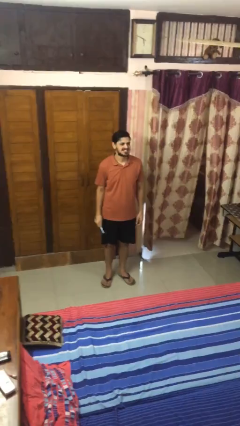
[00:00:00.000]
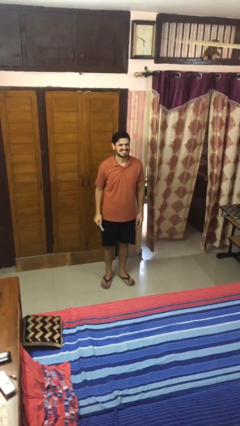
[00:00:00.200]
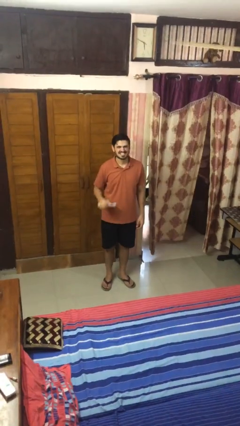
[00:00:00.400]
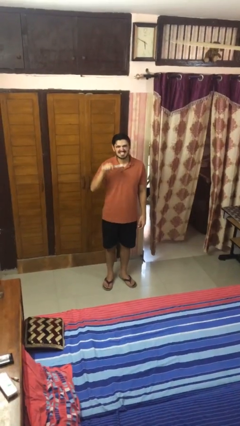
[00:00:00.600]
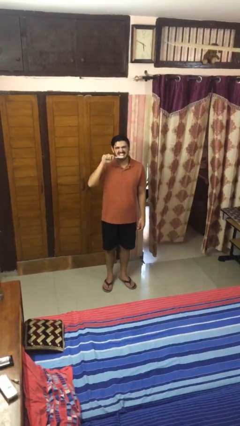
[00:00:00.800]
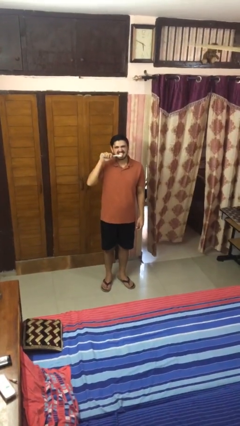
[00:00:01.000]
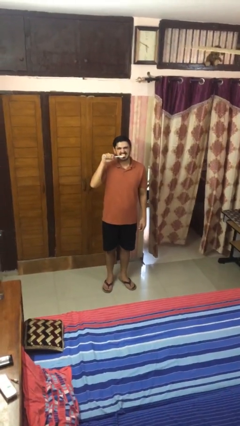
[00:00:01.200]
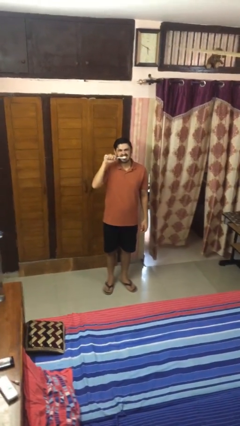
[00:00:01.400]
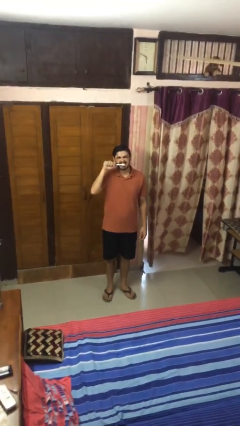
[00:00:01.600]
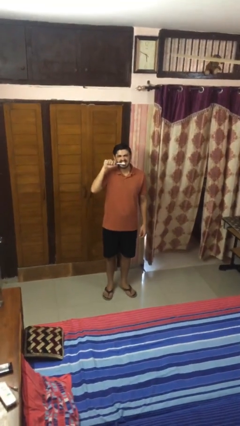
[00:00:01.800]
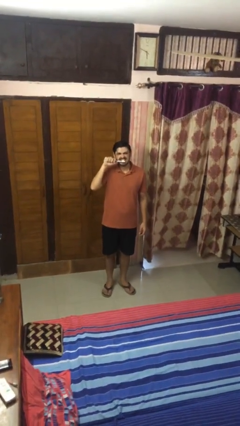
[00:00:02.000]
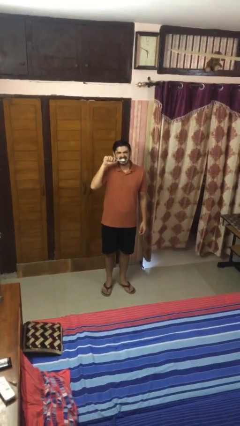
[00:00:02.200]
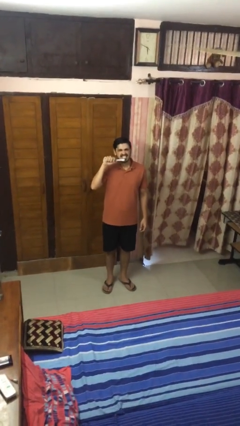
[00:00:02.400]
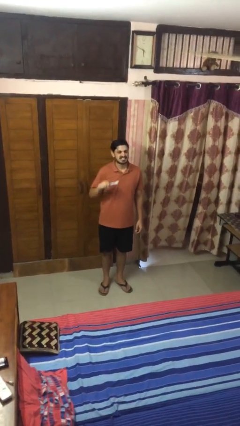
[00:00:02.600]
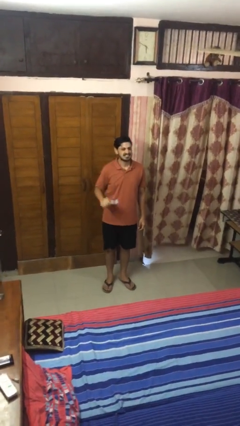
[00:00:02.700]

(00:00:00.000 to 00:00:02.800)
person brushes teeth

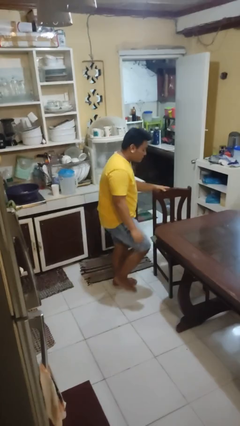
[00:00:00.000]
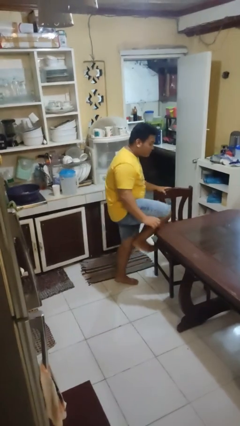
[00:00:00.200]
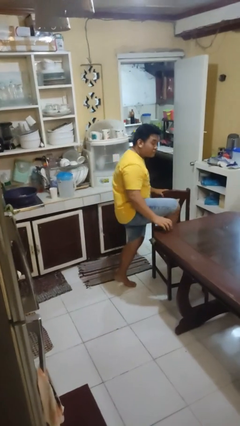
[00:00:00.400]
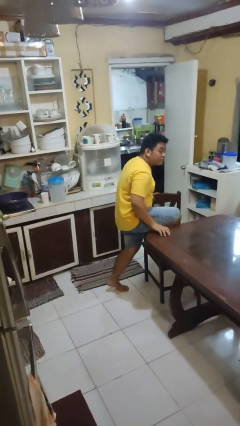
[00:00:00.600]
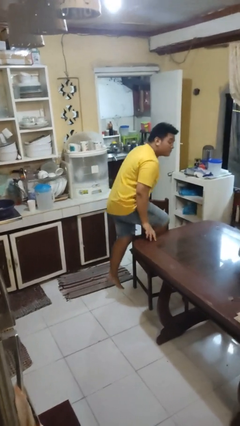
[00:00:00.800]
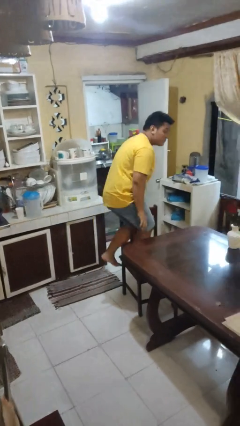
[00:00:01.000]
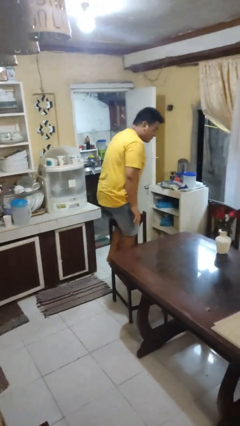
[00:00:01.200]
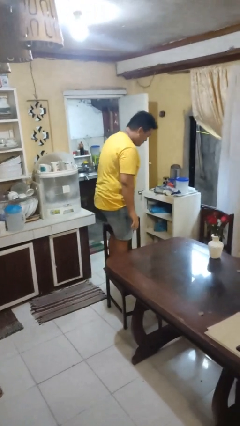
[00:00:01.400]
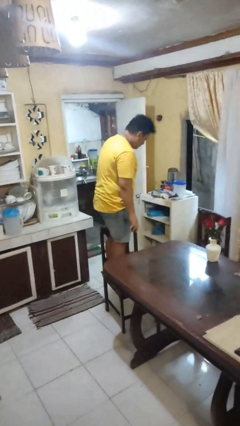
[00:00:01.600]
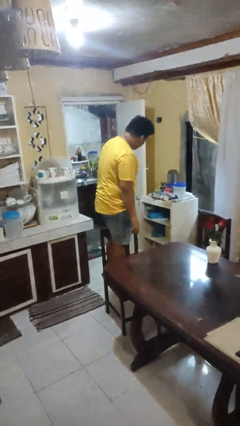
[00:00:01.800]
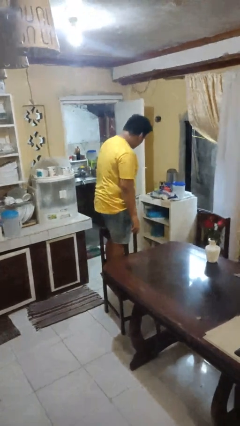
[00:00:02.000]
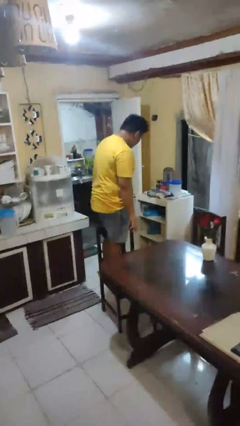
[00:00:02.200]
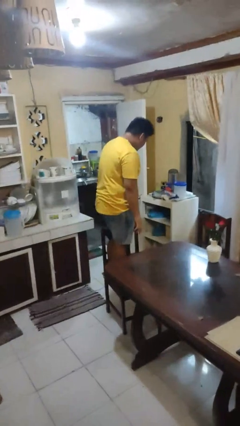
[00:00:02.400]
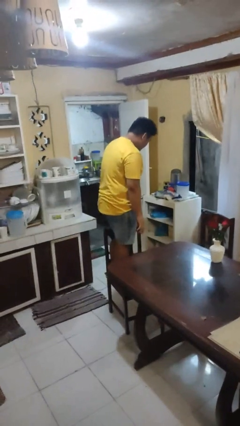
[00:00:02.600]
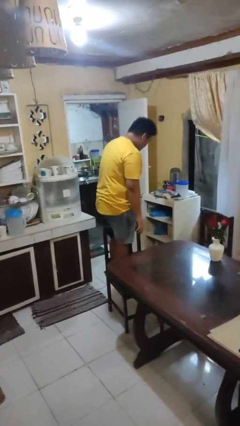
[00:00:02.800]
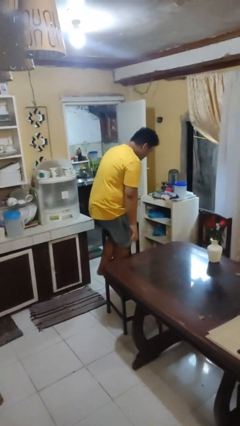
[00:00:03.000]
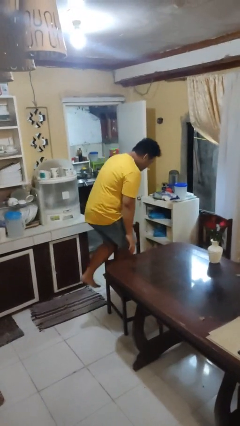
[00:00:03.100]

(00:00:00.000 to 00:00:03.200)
person climbs on chair

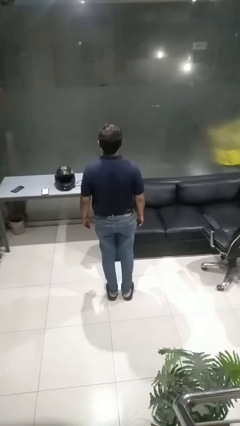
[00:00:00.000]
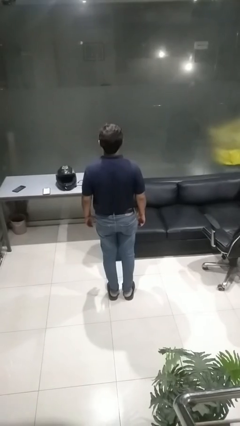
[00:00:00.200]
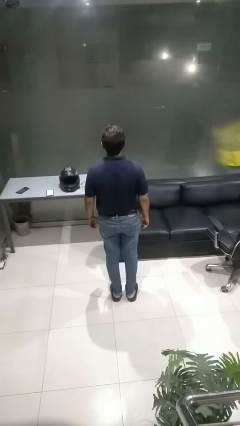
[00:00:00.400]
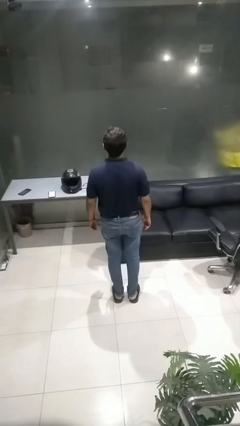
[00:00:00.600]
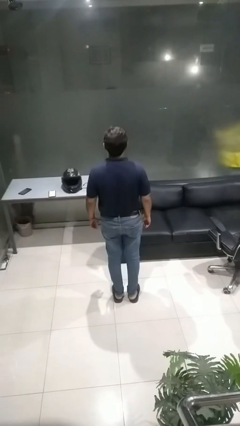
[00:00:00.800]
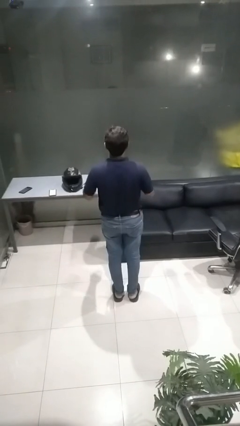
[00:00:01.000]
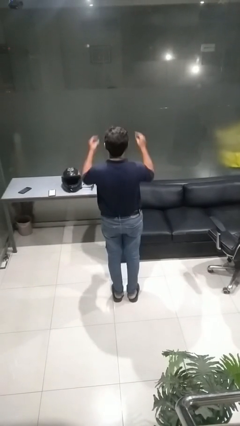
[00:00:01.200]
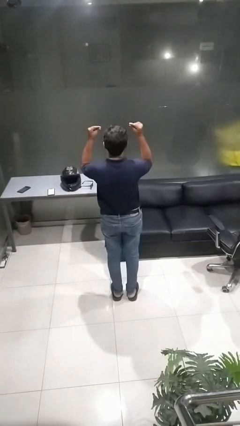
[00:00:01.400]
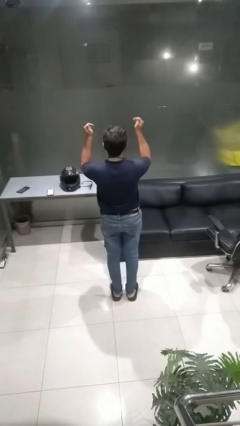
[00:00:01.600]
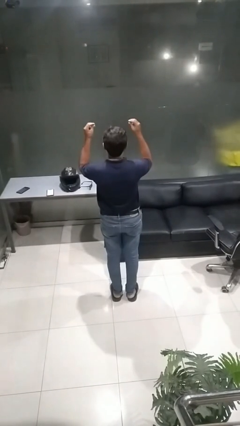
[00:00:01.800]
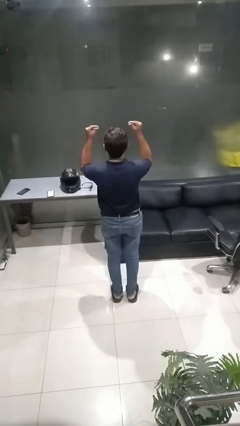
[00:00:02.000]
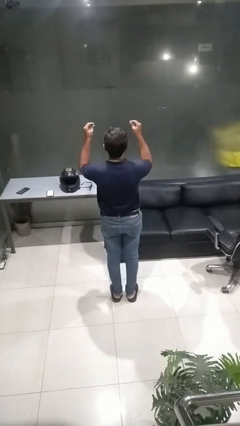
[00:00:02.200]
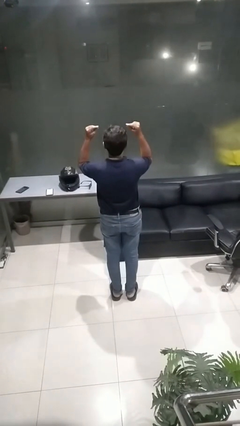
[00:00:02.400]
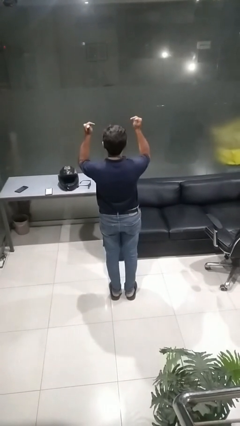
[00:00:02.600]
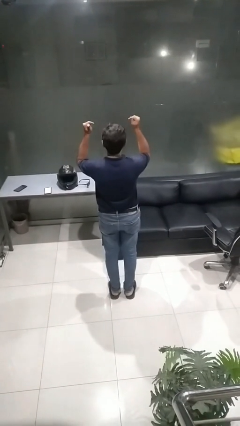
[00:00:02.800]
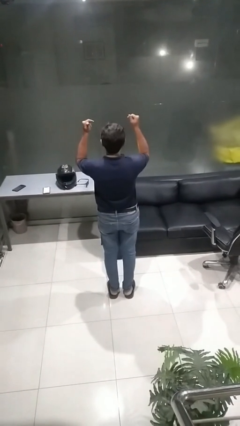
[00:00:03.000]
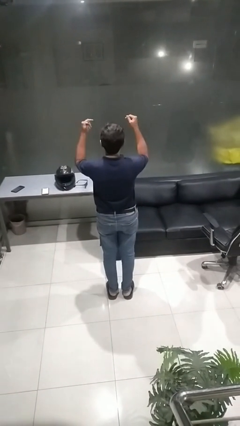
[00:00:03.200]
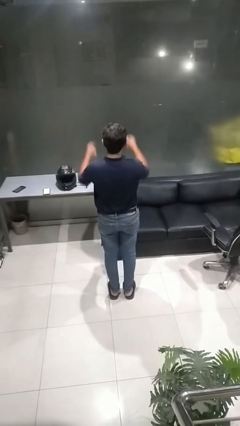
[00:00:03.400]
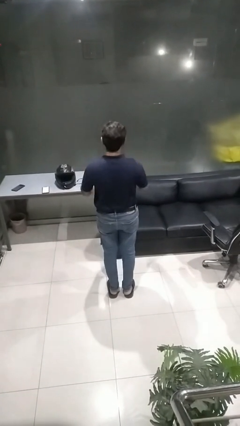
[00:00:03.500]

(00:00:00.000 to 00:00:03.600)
person snaps fingers

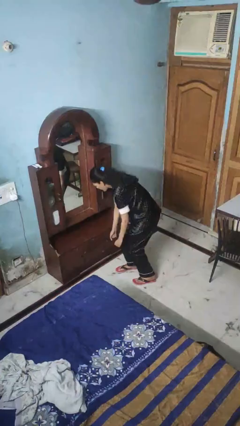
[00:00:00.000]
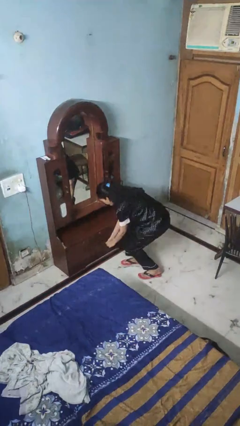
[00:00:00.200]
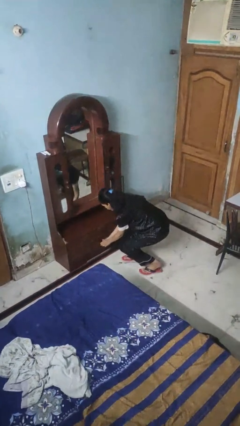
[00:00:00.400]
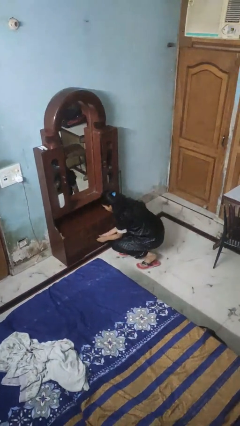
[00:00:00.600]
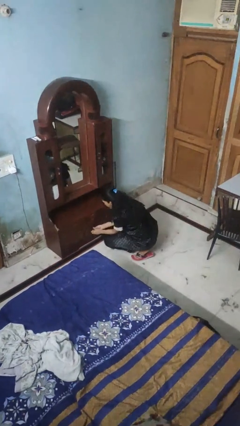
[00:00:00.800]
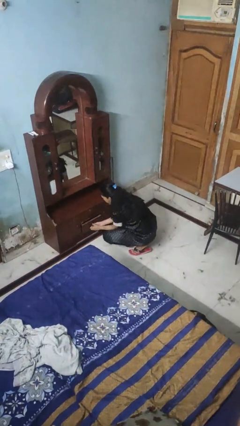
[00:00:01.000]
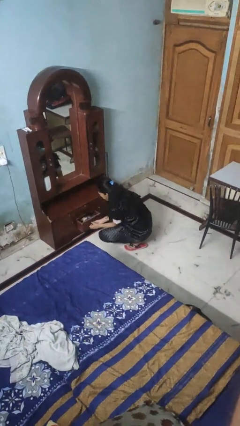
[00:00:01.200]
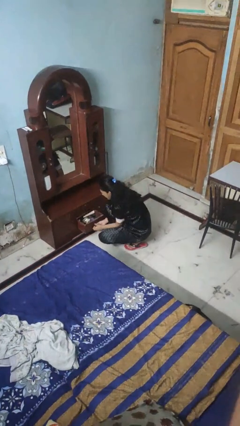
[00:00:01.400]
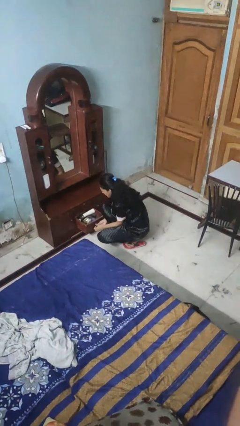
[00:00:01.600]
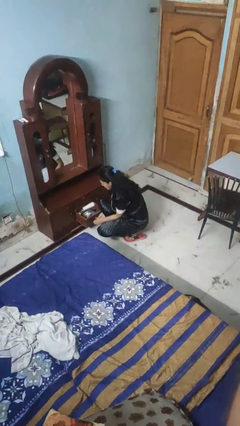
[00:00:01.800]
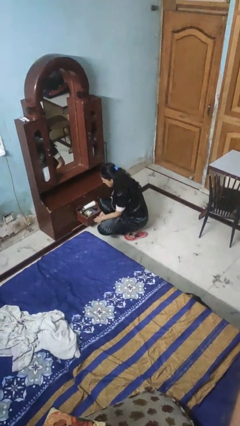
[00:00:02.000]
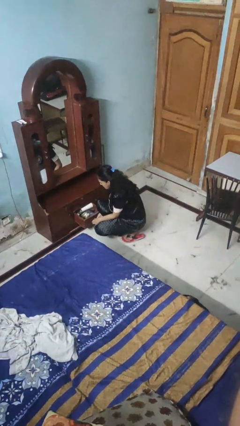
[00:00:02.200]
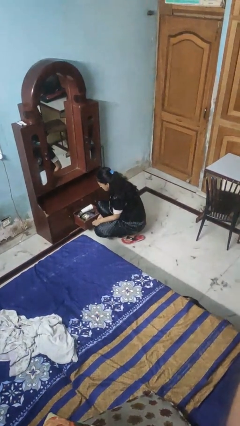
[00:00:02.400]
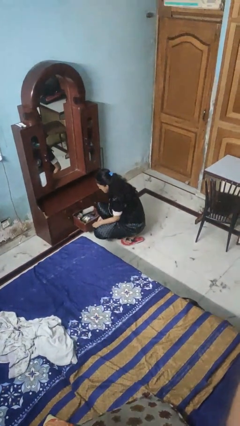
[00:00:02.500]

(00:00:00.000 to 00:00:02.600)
person opens dresser drawer

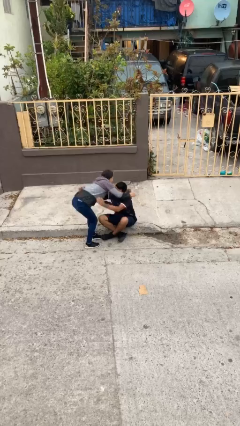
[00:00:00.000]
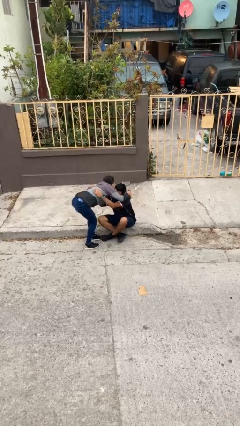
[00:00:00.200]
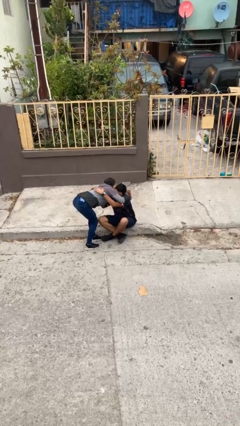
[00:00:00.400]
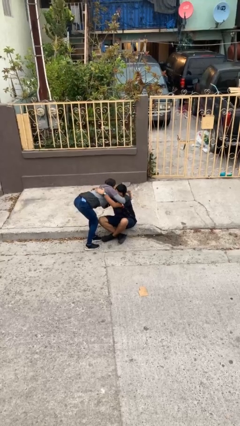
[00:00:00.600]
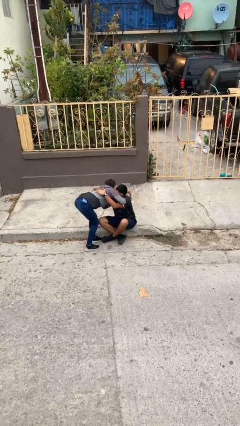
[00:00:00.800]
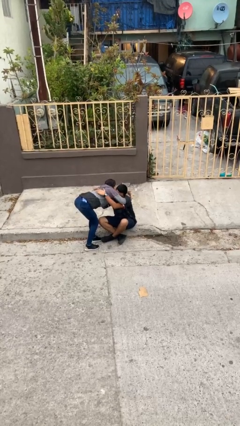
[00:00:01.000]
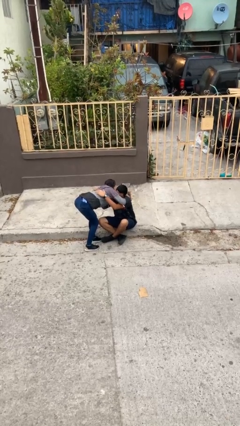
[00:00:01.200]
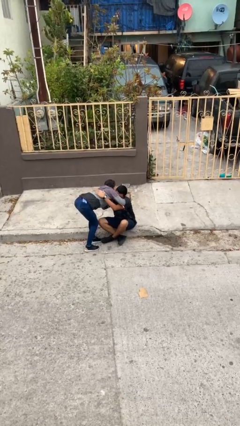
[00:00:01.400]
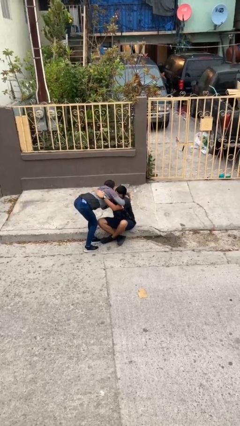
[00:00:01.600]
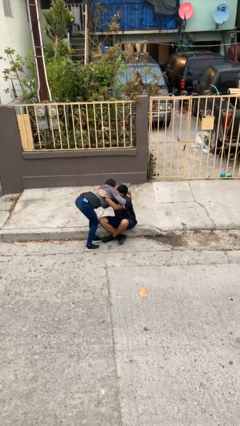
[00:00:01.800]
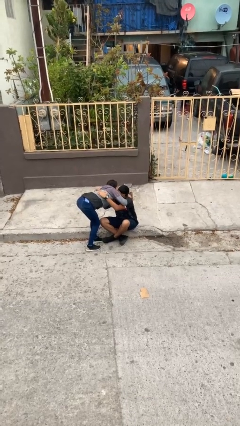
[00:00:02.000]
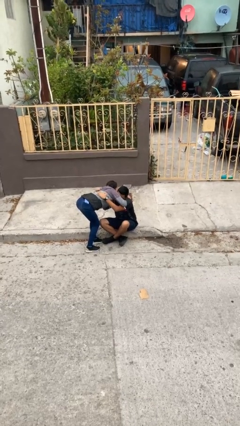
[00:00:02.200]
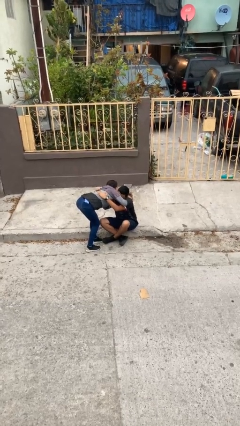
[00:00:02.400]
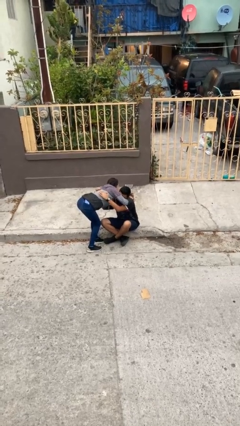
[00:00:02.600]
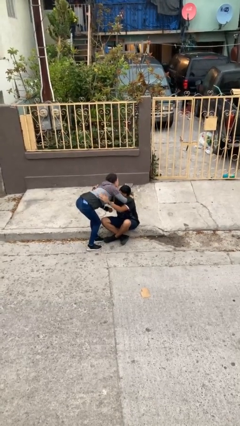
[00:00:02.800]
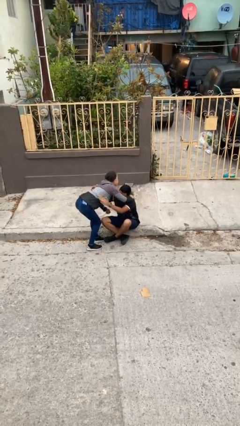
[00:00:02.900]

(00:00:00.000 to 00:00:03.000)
person embraces person

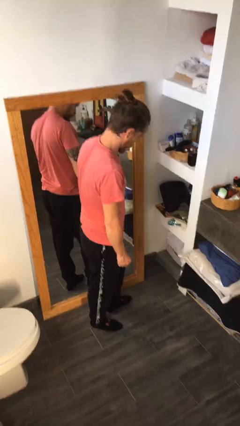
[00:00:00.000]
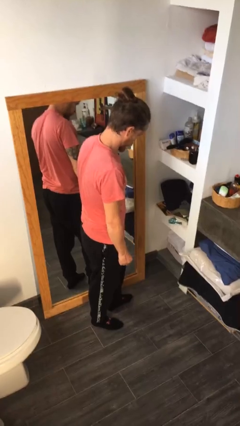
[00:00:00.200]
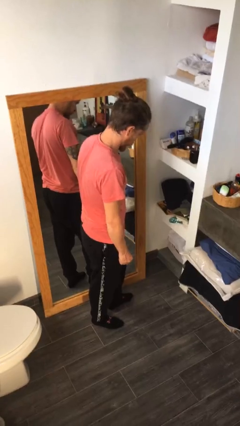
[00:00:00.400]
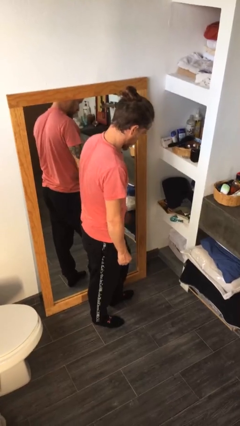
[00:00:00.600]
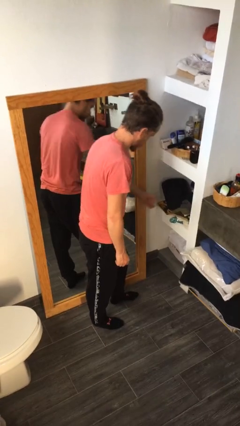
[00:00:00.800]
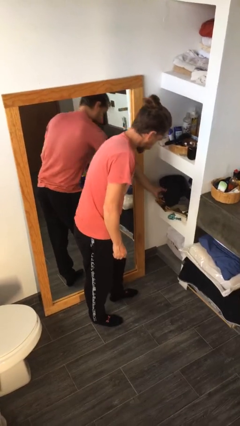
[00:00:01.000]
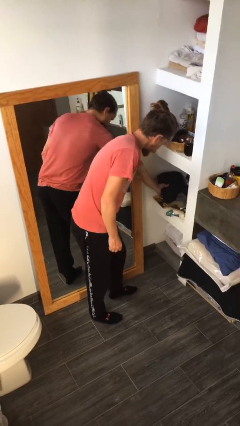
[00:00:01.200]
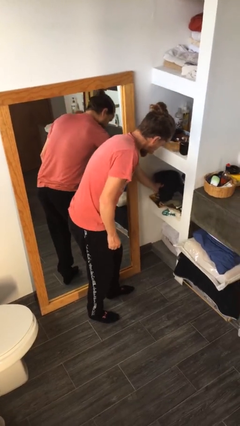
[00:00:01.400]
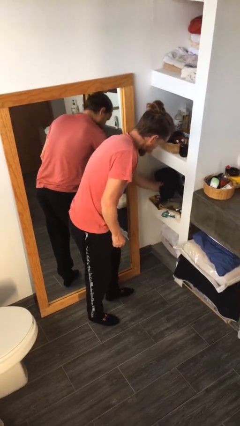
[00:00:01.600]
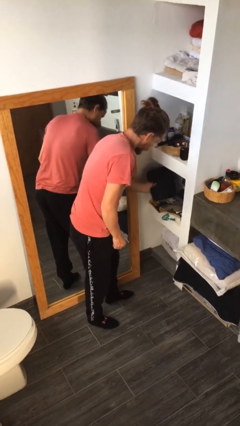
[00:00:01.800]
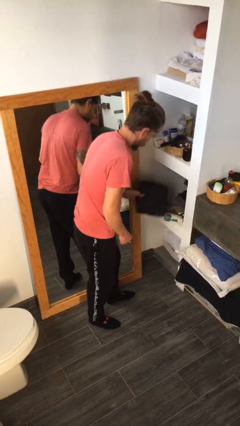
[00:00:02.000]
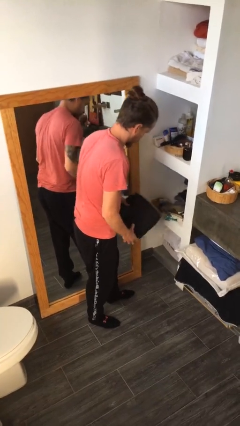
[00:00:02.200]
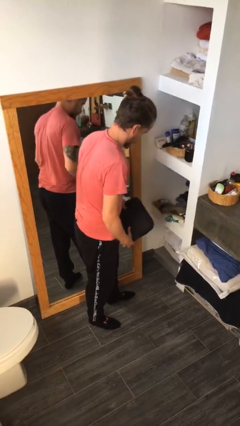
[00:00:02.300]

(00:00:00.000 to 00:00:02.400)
person picks up object from cabinet
